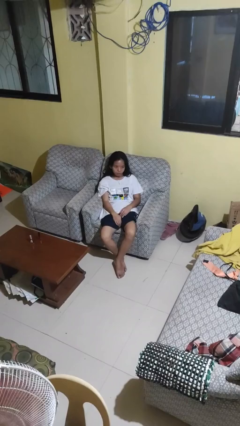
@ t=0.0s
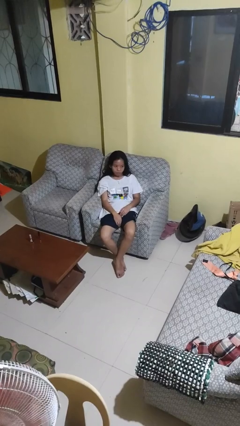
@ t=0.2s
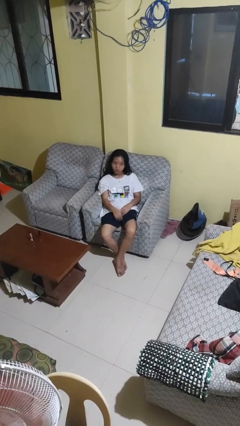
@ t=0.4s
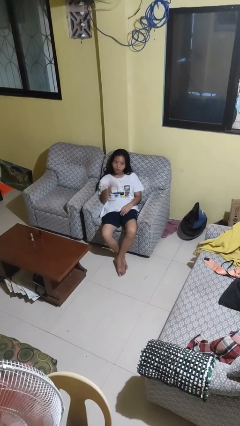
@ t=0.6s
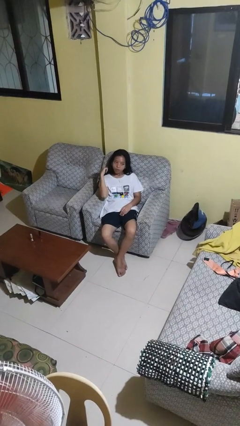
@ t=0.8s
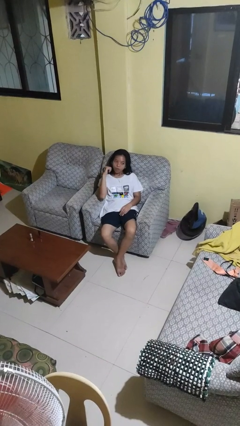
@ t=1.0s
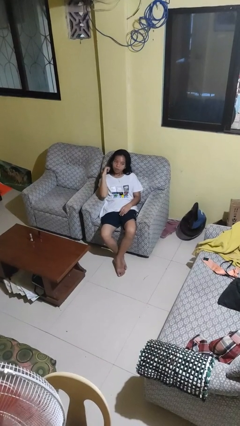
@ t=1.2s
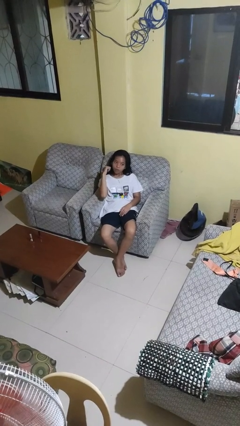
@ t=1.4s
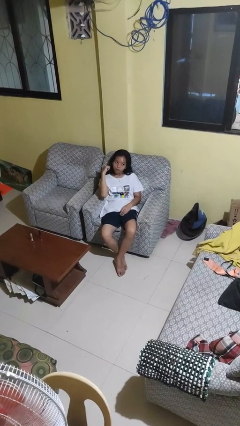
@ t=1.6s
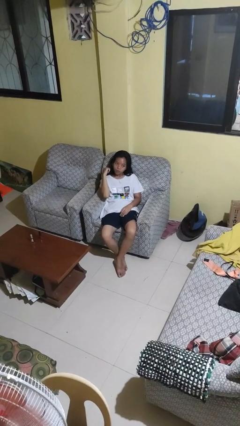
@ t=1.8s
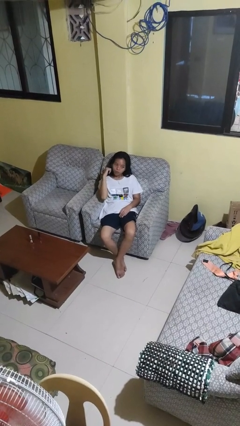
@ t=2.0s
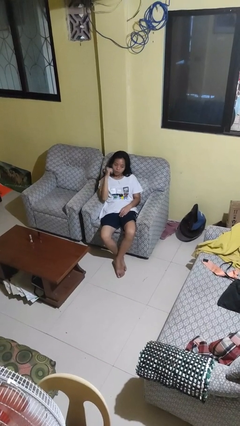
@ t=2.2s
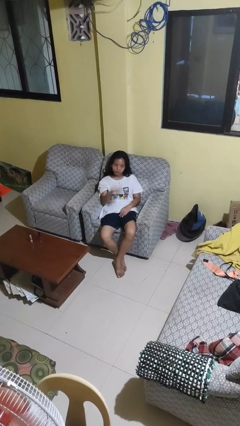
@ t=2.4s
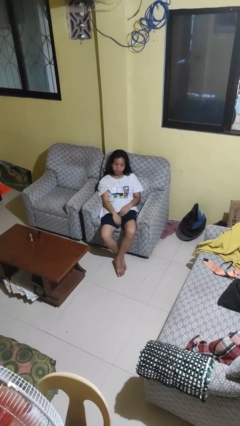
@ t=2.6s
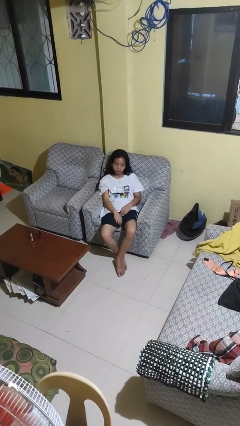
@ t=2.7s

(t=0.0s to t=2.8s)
person gestures behind me

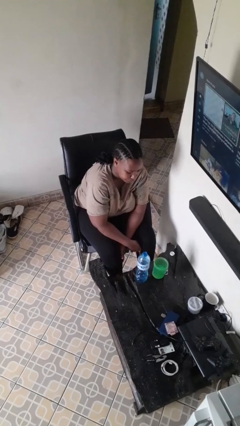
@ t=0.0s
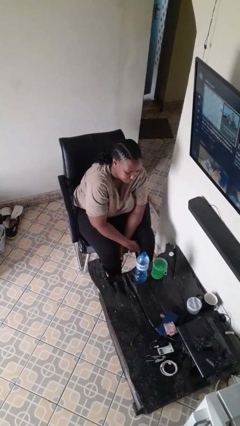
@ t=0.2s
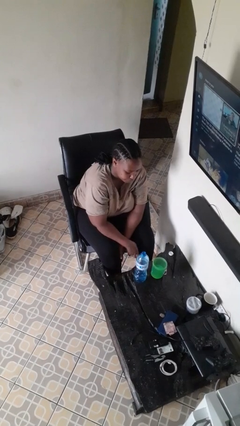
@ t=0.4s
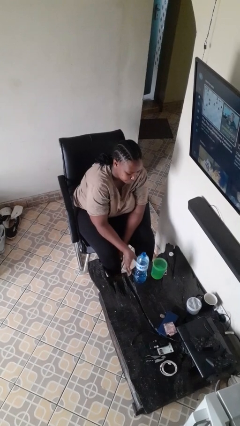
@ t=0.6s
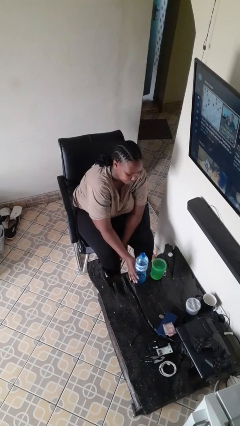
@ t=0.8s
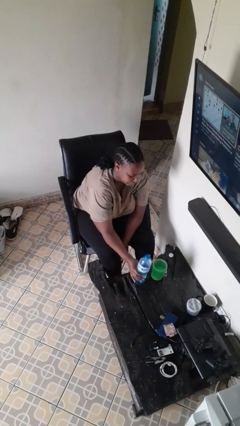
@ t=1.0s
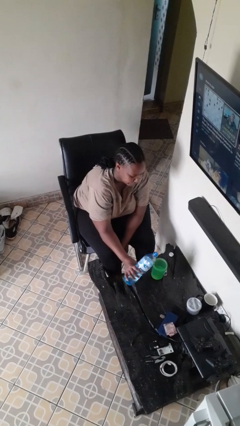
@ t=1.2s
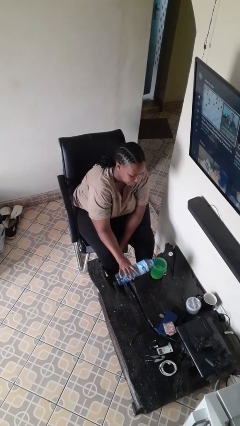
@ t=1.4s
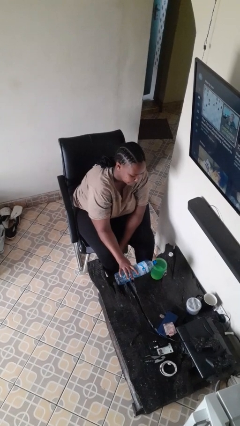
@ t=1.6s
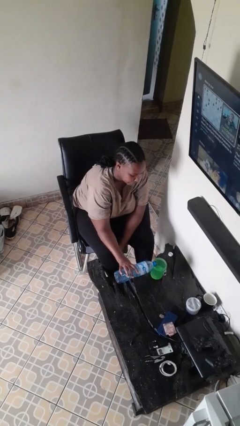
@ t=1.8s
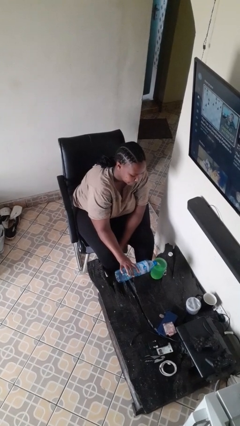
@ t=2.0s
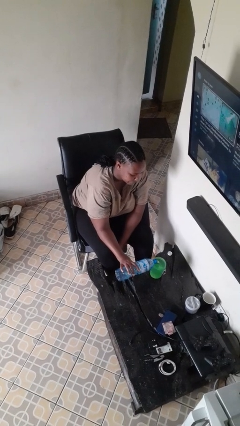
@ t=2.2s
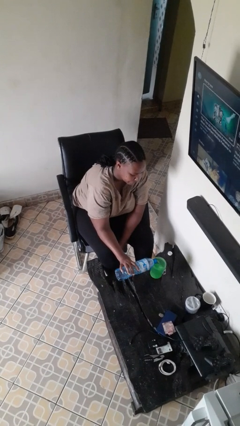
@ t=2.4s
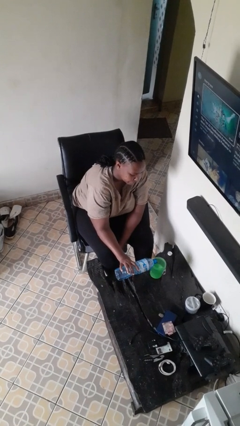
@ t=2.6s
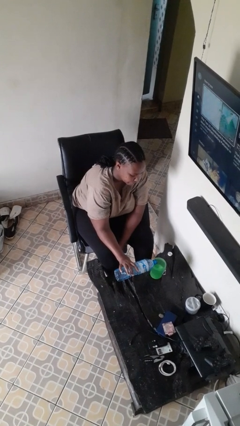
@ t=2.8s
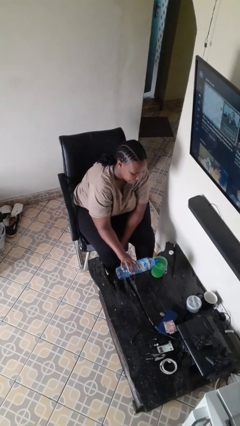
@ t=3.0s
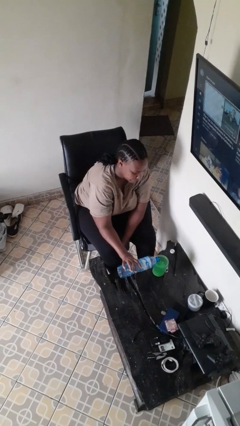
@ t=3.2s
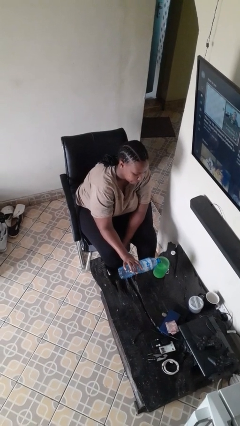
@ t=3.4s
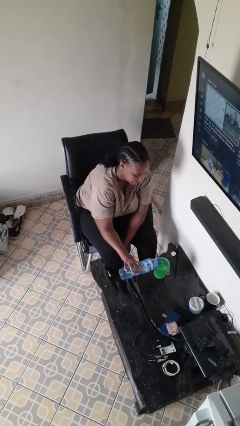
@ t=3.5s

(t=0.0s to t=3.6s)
person pours liquid into cup

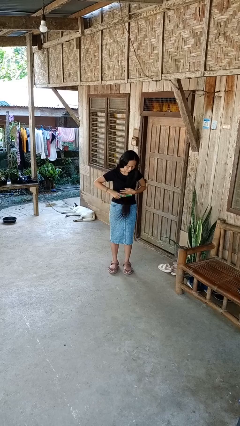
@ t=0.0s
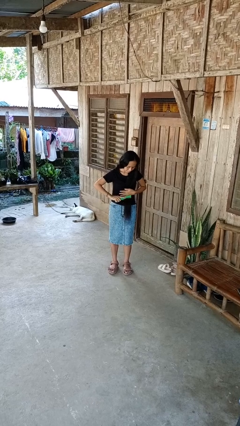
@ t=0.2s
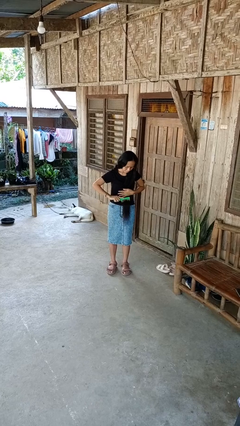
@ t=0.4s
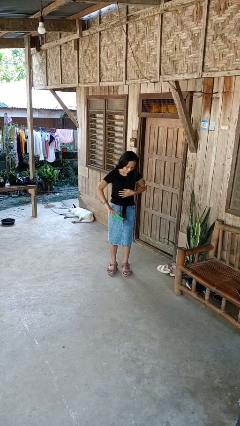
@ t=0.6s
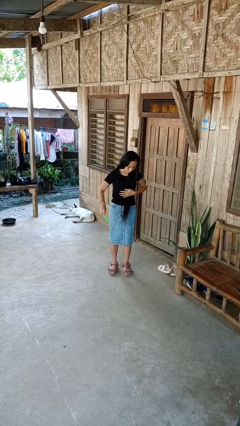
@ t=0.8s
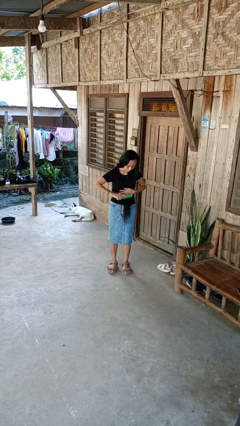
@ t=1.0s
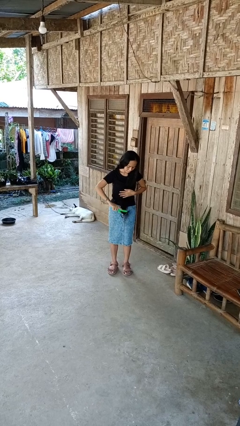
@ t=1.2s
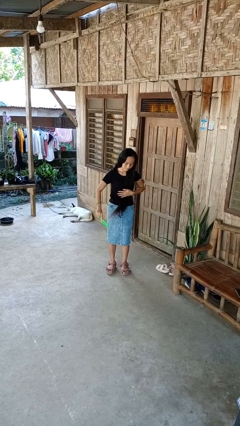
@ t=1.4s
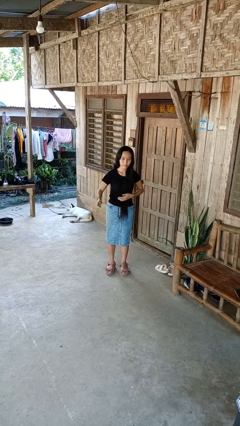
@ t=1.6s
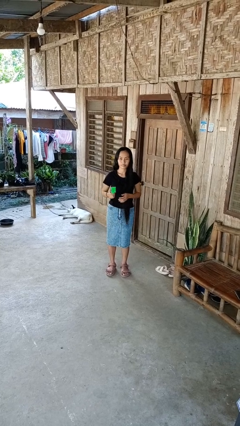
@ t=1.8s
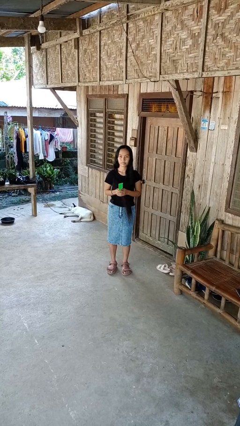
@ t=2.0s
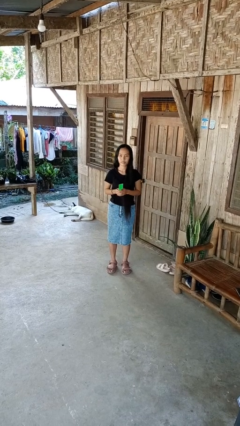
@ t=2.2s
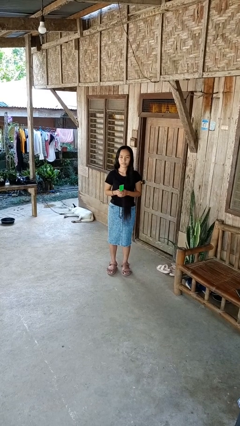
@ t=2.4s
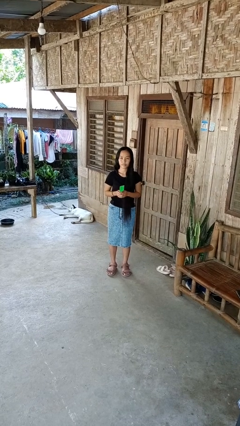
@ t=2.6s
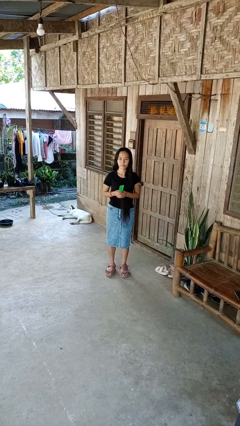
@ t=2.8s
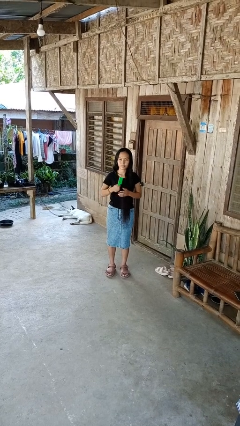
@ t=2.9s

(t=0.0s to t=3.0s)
person brushes hair

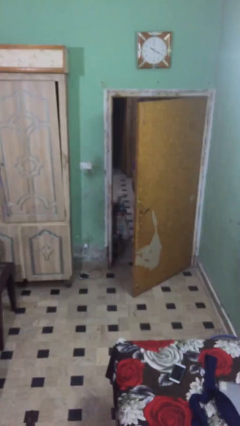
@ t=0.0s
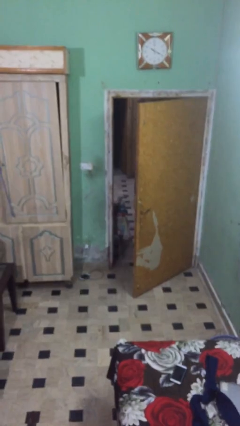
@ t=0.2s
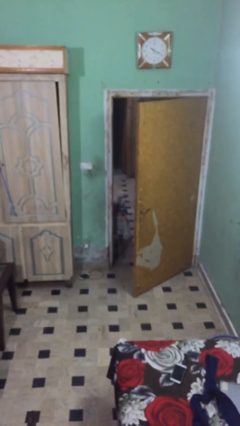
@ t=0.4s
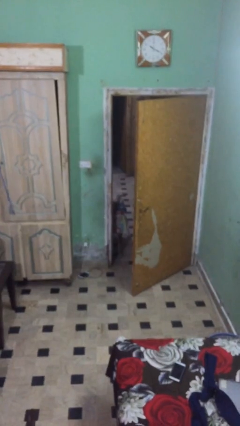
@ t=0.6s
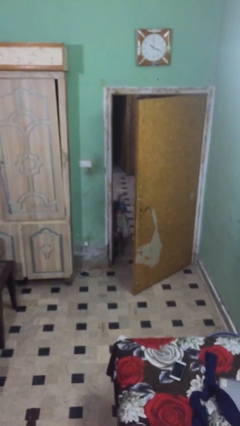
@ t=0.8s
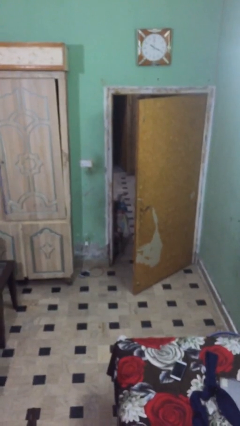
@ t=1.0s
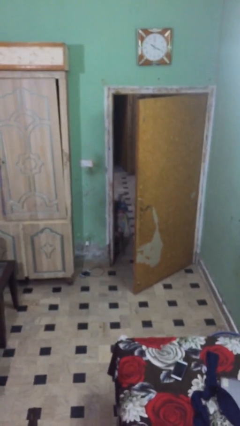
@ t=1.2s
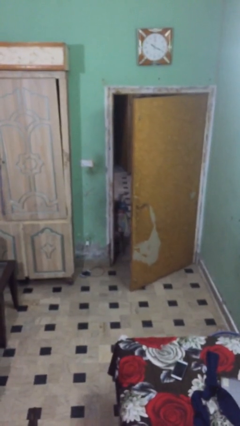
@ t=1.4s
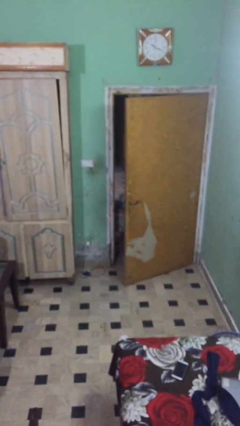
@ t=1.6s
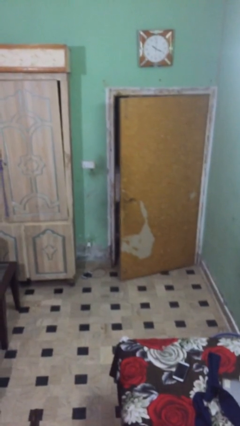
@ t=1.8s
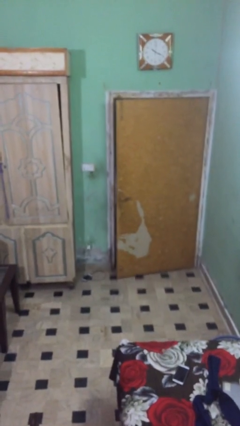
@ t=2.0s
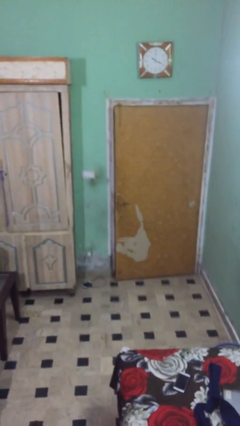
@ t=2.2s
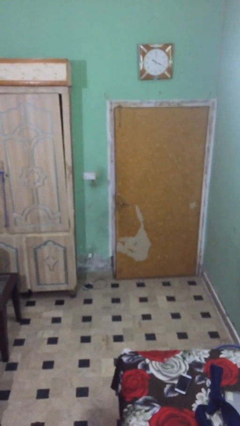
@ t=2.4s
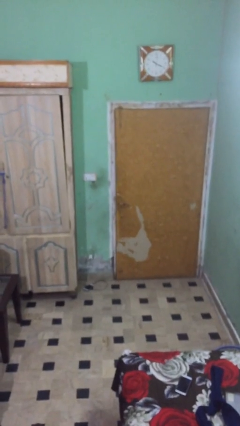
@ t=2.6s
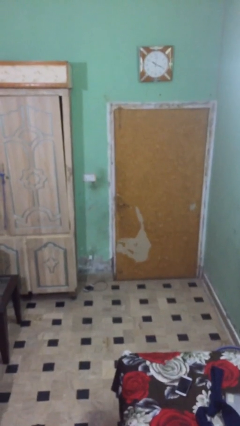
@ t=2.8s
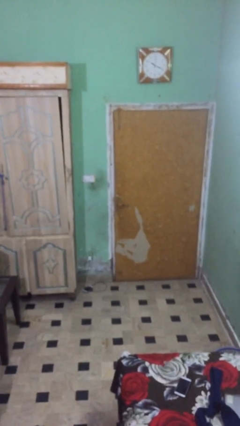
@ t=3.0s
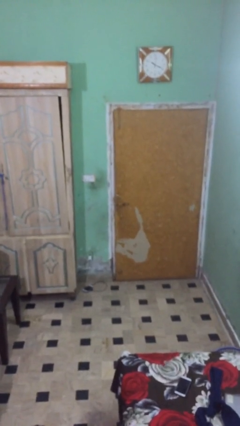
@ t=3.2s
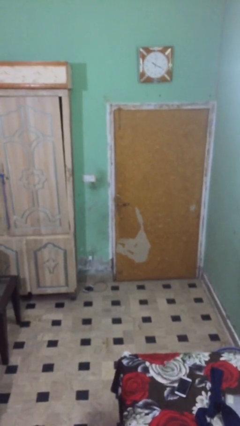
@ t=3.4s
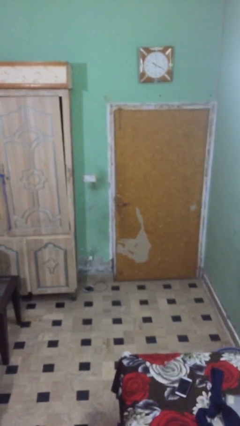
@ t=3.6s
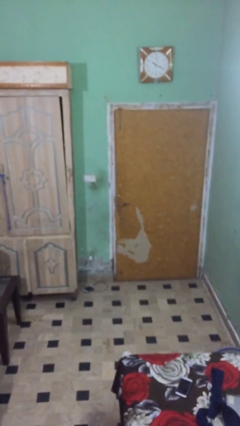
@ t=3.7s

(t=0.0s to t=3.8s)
person closes facility door

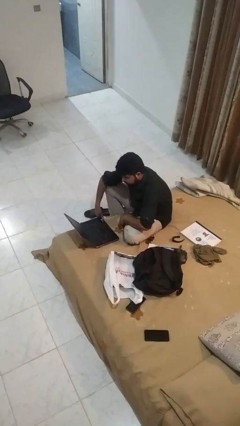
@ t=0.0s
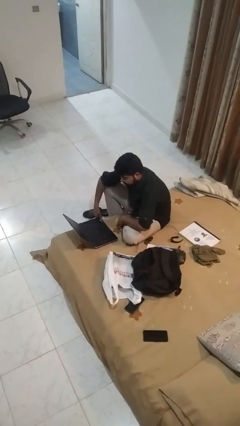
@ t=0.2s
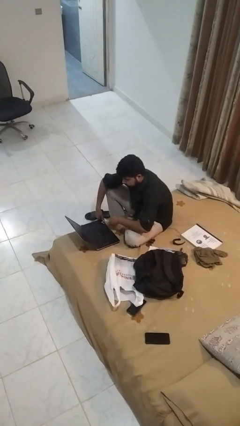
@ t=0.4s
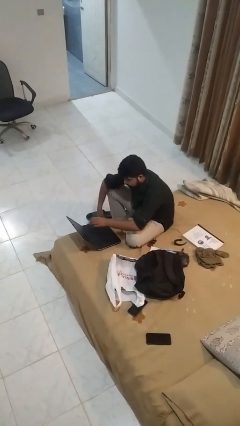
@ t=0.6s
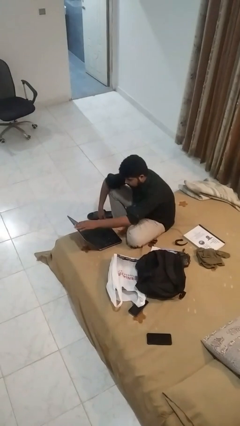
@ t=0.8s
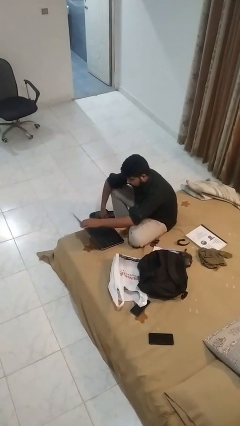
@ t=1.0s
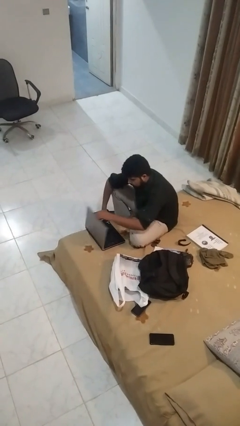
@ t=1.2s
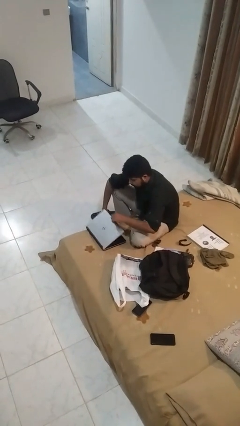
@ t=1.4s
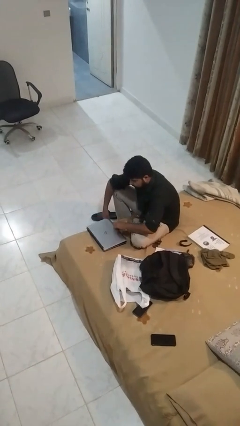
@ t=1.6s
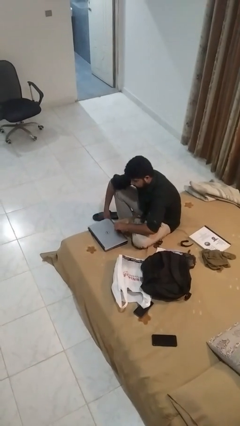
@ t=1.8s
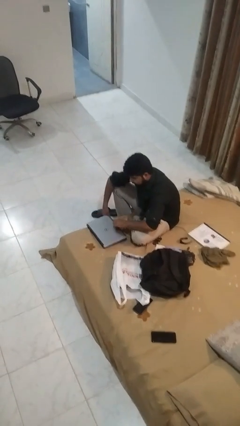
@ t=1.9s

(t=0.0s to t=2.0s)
person closes laptop

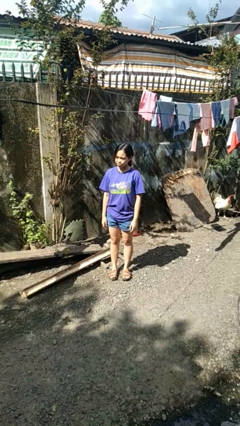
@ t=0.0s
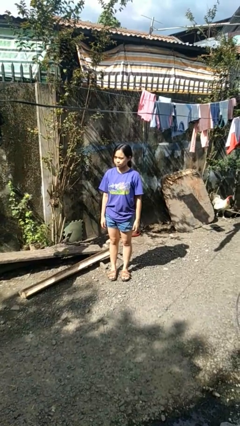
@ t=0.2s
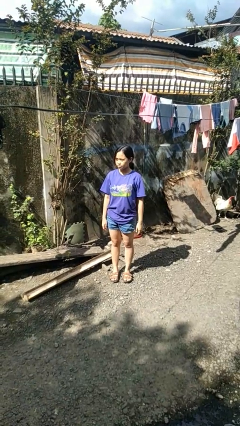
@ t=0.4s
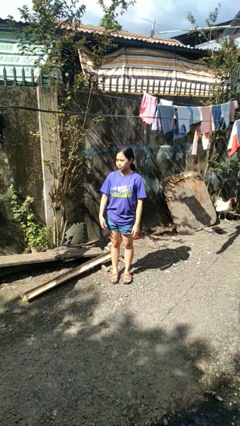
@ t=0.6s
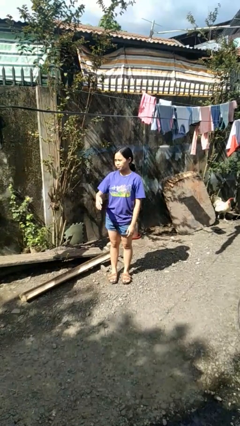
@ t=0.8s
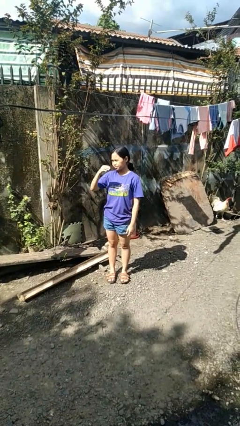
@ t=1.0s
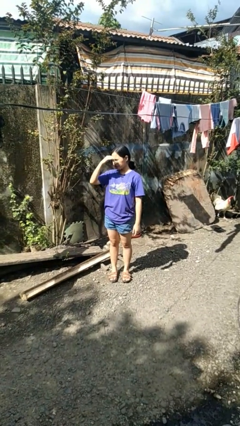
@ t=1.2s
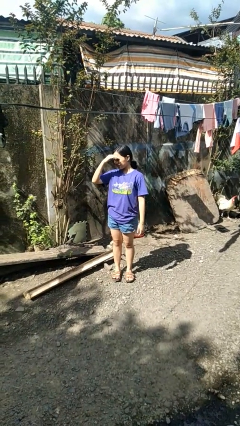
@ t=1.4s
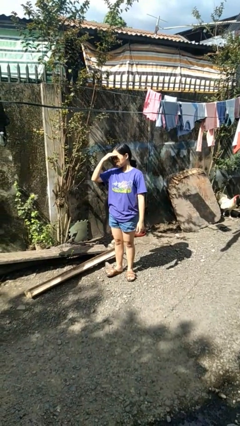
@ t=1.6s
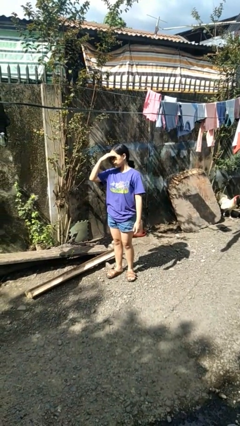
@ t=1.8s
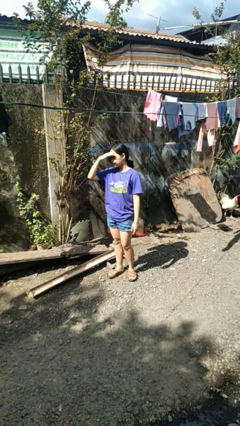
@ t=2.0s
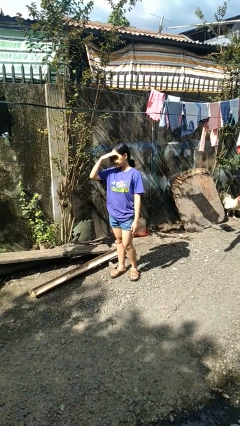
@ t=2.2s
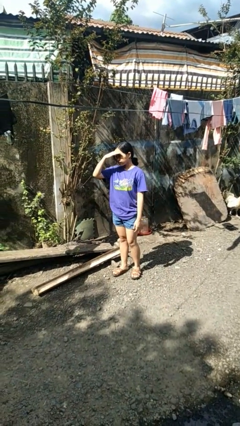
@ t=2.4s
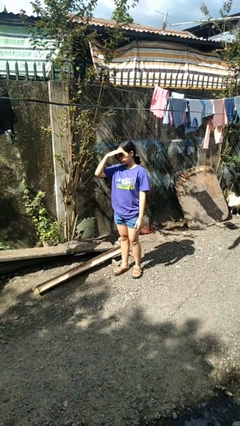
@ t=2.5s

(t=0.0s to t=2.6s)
person shades eyes
